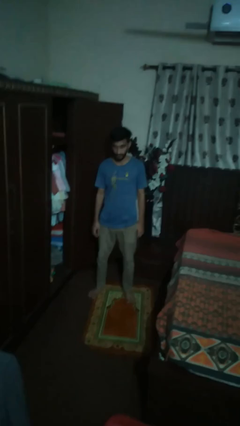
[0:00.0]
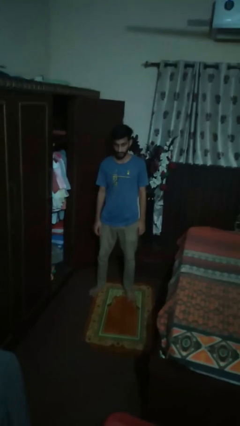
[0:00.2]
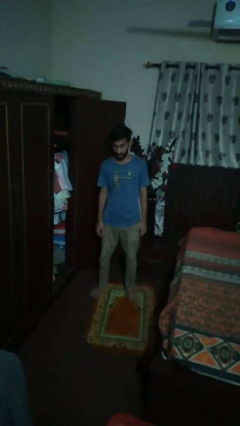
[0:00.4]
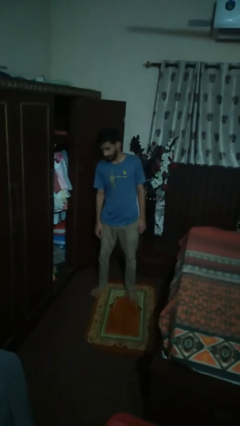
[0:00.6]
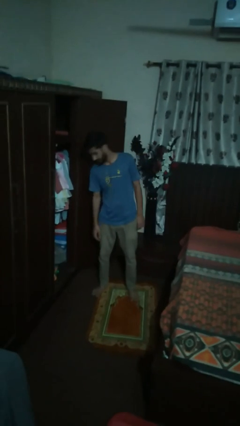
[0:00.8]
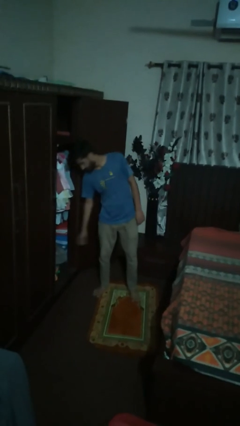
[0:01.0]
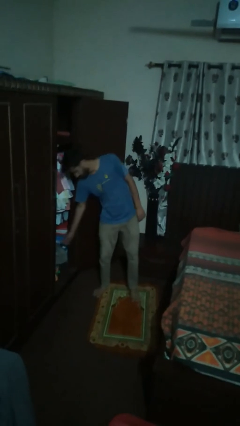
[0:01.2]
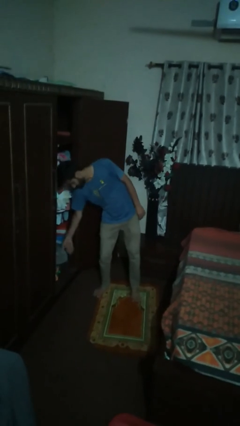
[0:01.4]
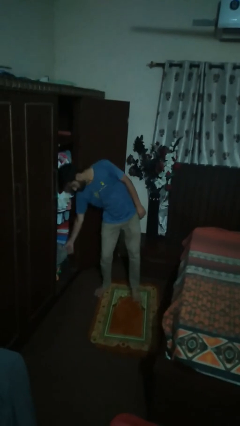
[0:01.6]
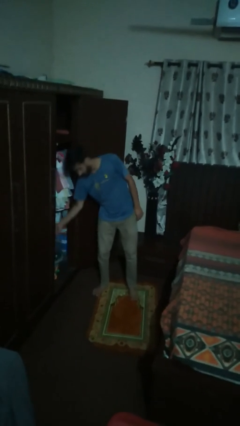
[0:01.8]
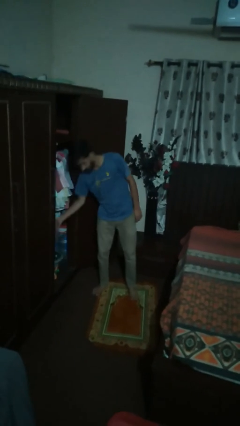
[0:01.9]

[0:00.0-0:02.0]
person picks up object from cabinet

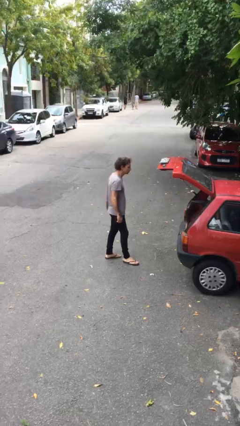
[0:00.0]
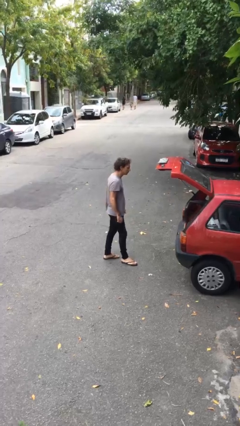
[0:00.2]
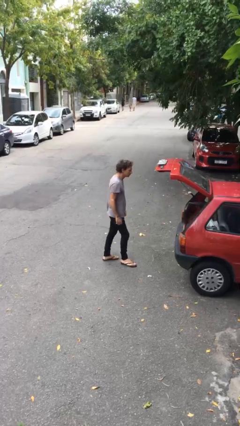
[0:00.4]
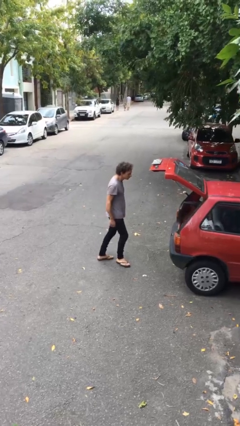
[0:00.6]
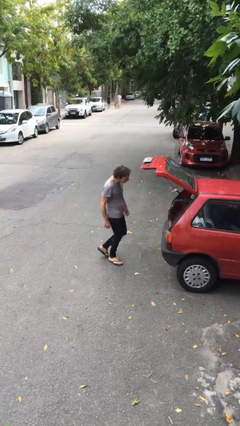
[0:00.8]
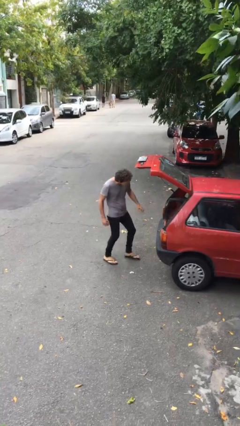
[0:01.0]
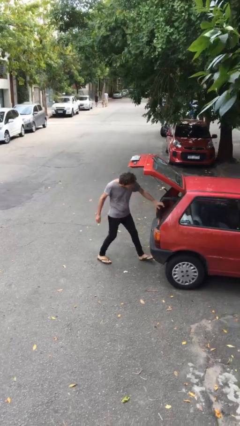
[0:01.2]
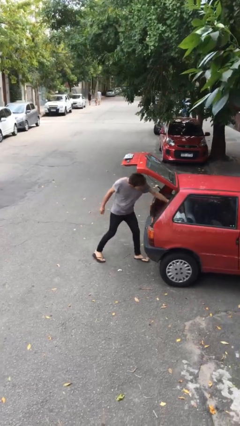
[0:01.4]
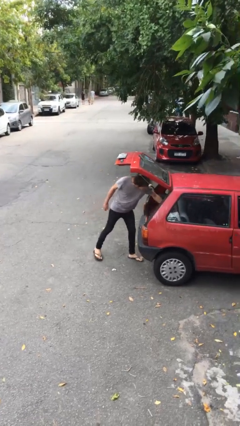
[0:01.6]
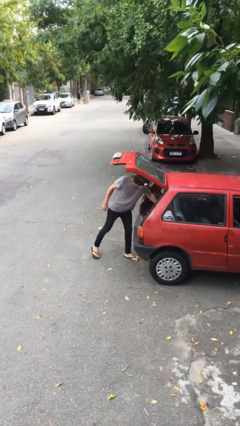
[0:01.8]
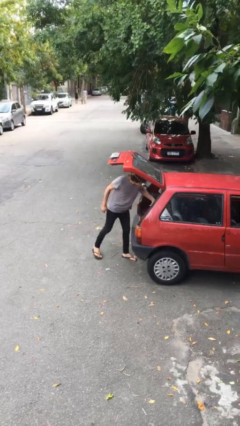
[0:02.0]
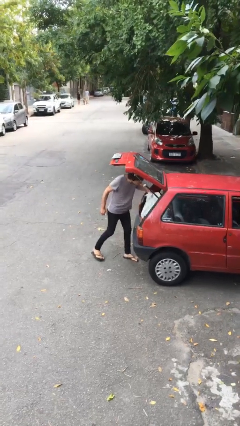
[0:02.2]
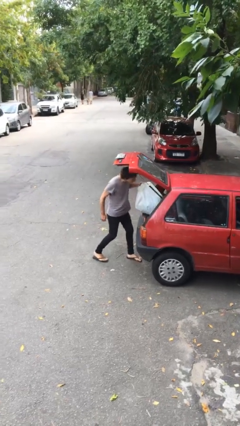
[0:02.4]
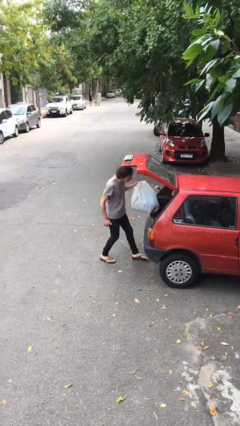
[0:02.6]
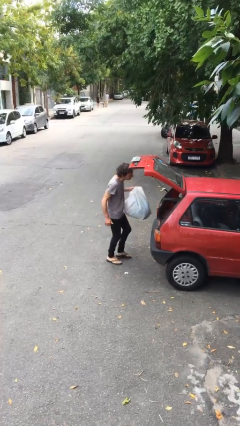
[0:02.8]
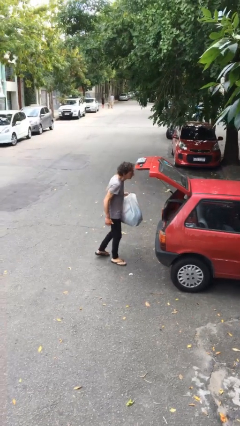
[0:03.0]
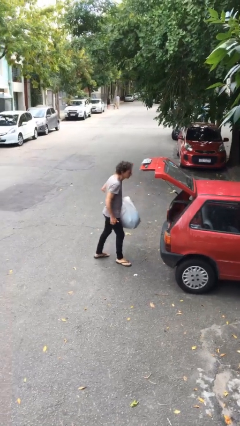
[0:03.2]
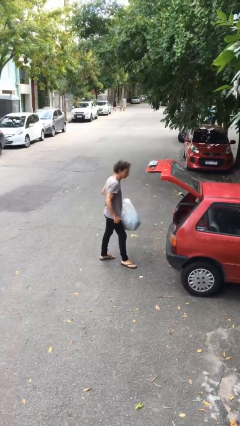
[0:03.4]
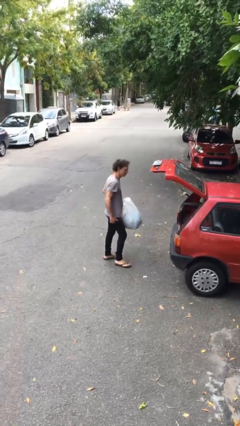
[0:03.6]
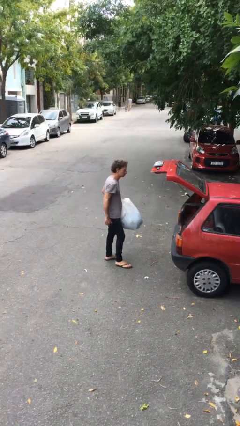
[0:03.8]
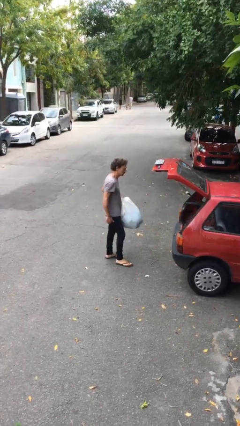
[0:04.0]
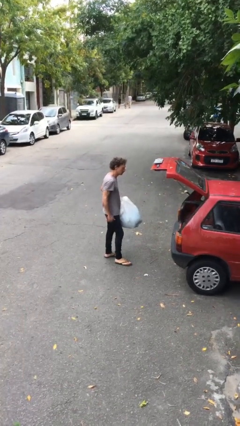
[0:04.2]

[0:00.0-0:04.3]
person unloads car

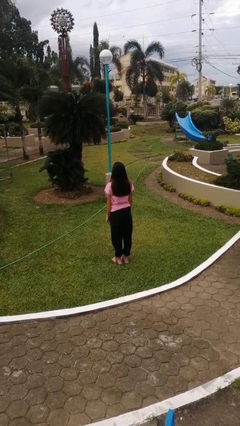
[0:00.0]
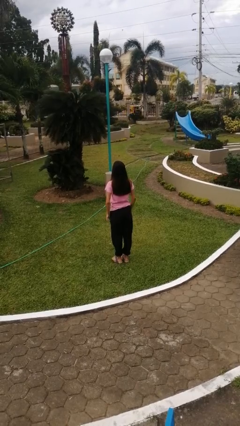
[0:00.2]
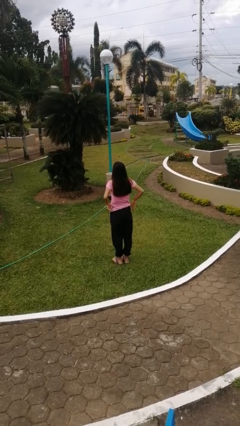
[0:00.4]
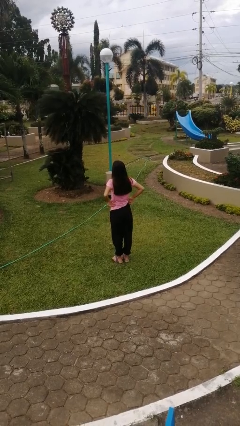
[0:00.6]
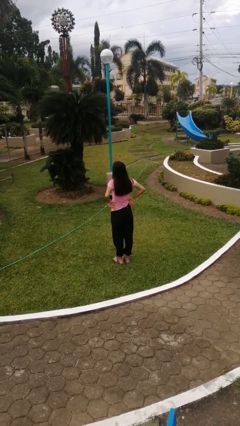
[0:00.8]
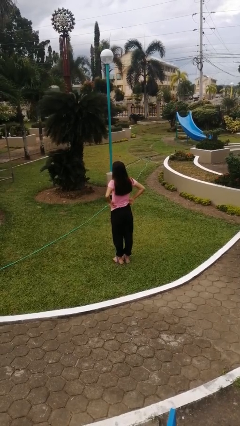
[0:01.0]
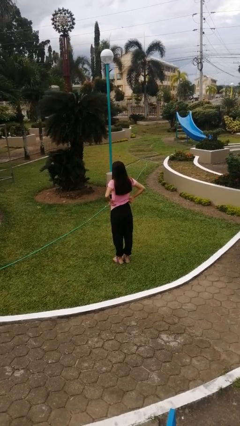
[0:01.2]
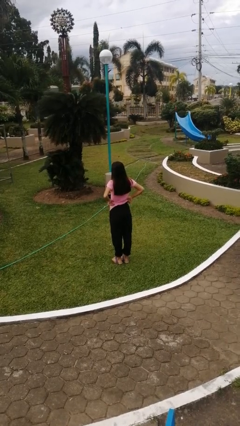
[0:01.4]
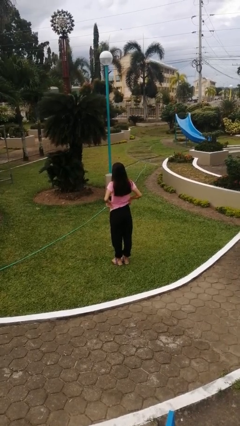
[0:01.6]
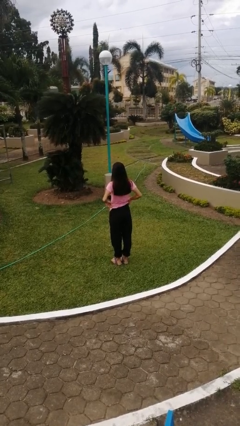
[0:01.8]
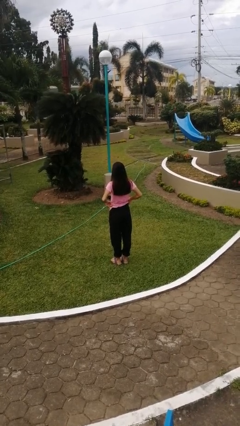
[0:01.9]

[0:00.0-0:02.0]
person hikes up pants

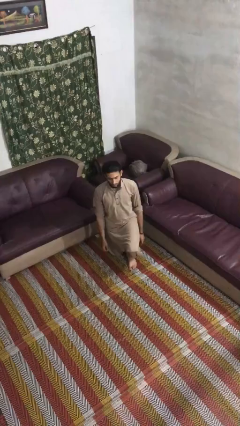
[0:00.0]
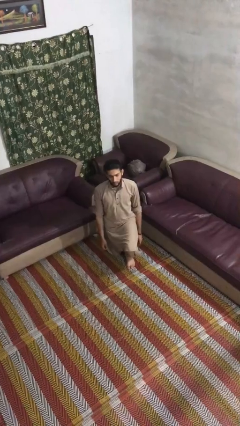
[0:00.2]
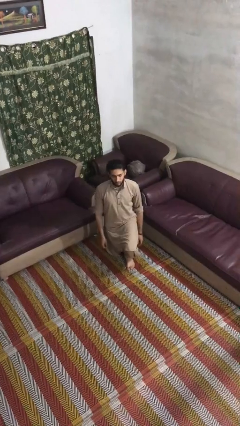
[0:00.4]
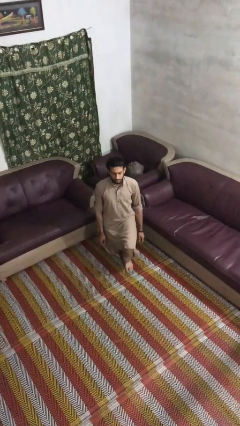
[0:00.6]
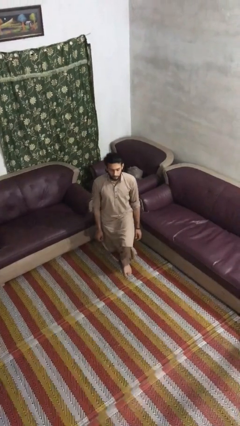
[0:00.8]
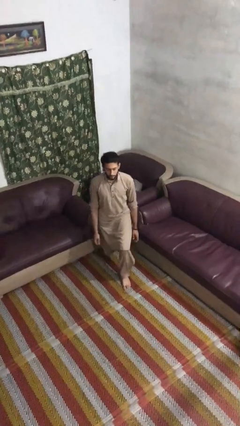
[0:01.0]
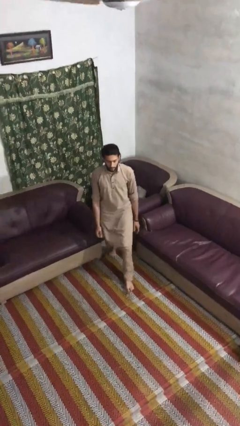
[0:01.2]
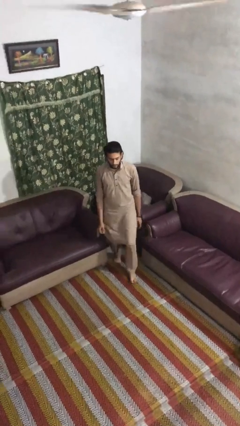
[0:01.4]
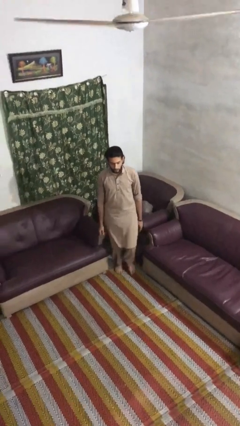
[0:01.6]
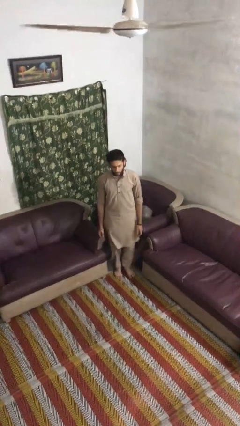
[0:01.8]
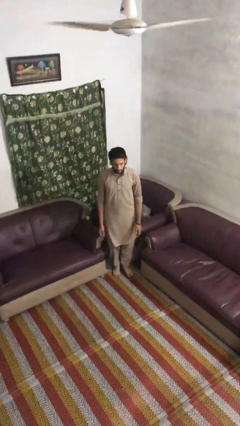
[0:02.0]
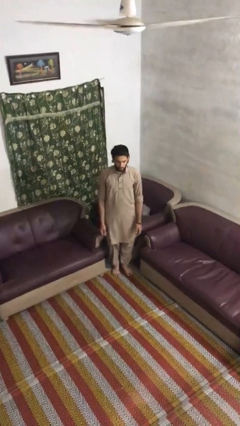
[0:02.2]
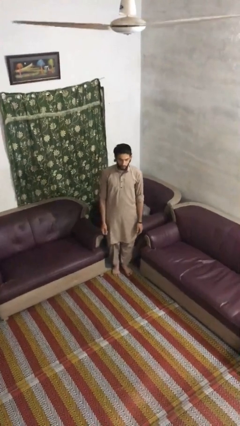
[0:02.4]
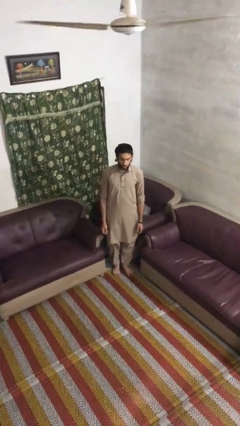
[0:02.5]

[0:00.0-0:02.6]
person stands up from floor

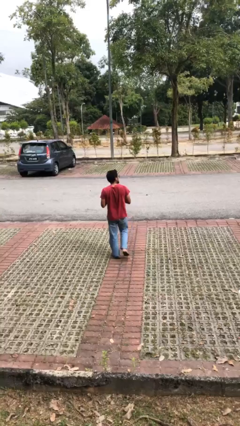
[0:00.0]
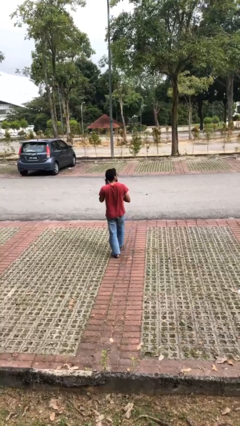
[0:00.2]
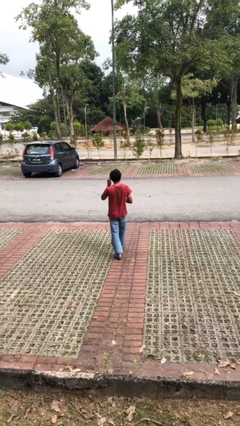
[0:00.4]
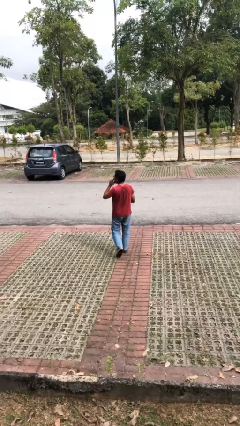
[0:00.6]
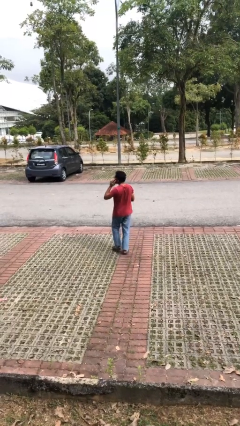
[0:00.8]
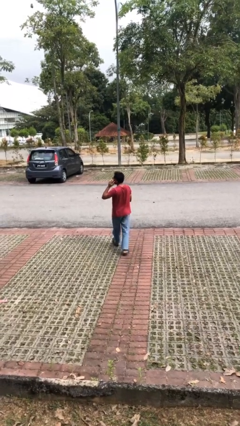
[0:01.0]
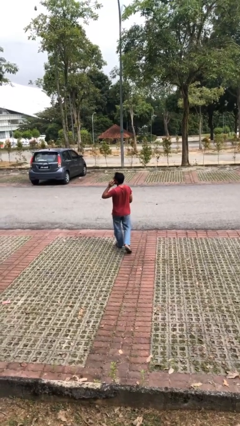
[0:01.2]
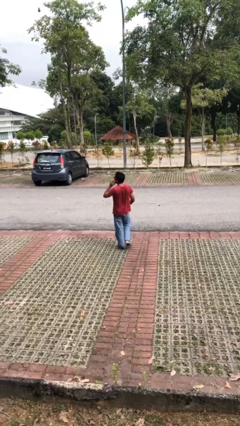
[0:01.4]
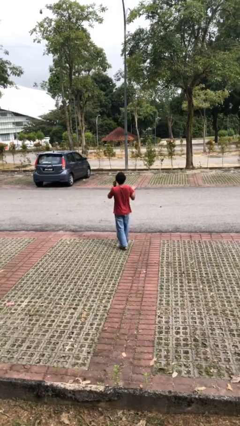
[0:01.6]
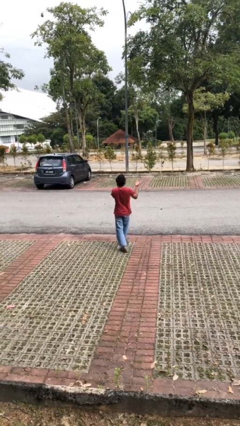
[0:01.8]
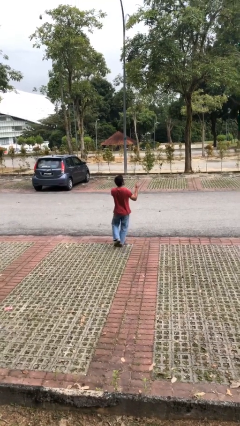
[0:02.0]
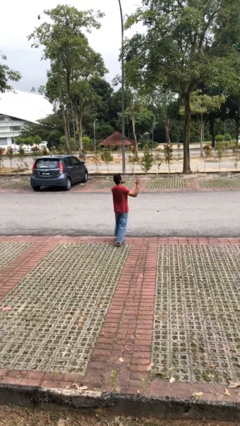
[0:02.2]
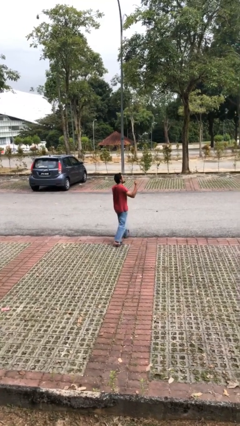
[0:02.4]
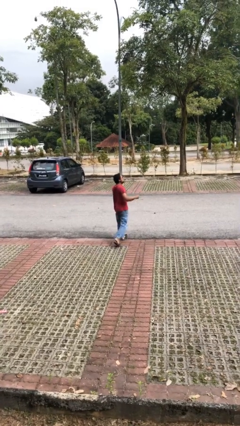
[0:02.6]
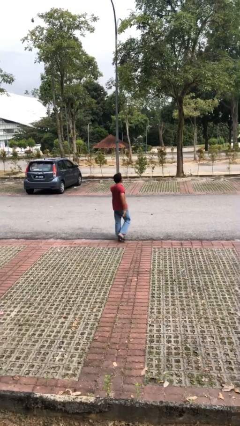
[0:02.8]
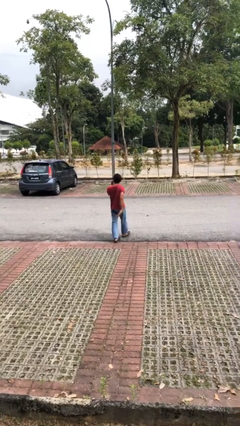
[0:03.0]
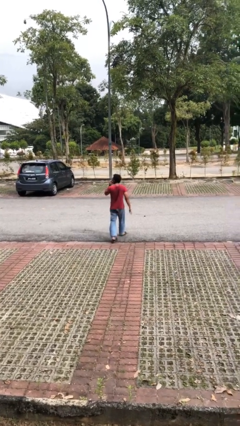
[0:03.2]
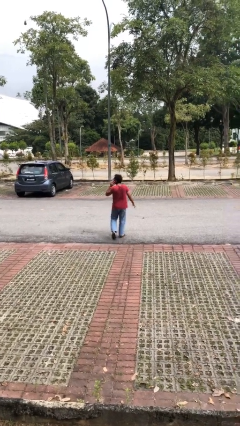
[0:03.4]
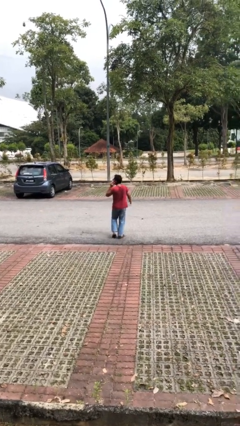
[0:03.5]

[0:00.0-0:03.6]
person talks on phone

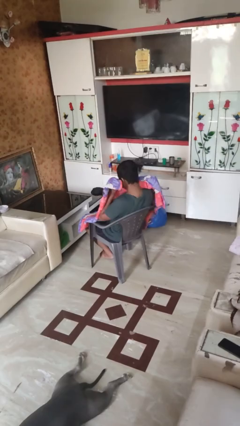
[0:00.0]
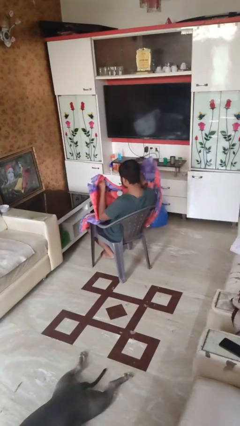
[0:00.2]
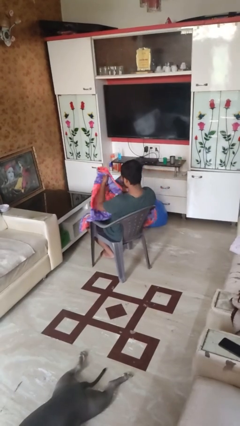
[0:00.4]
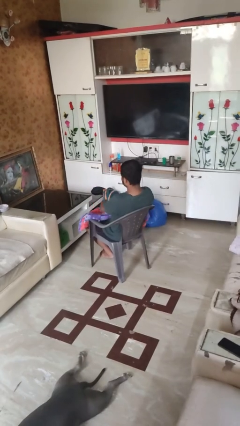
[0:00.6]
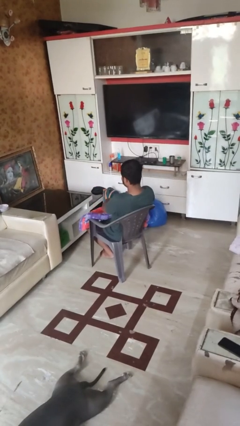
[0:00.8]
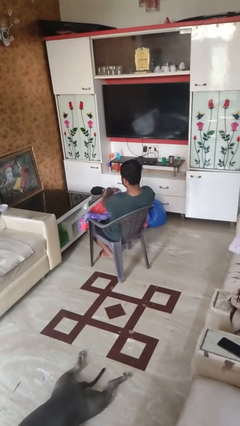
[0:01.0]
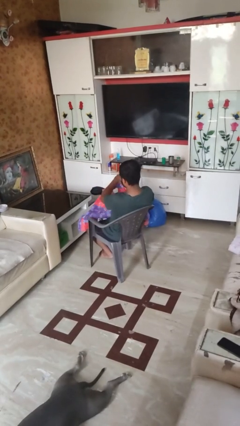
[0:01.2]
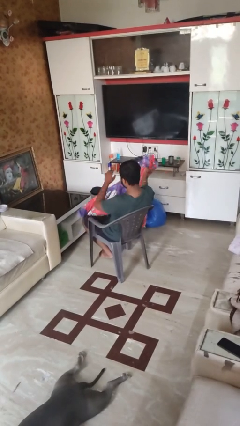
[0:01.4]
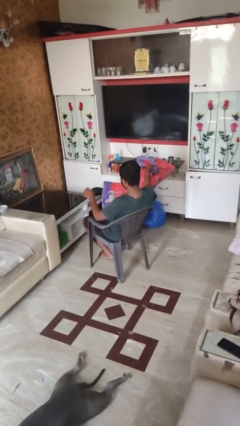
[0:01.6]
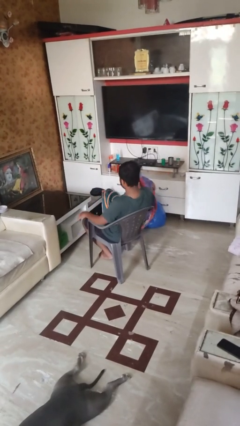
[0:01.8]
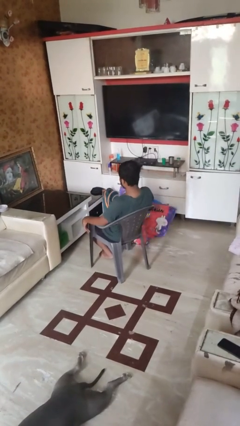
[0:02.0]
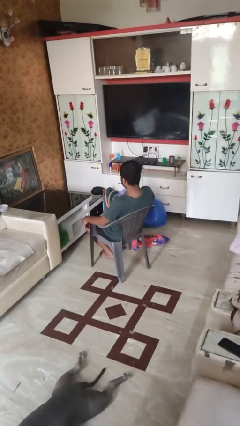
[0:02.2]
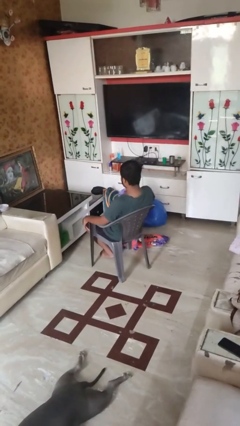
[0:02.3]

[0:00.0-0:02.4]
person uncovers with blanket

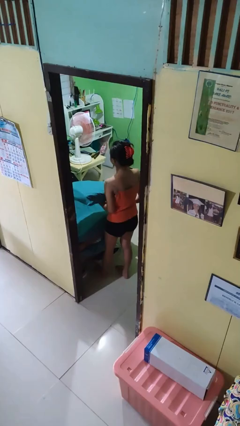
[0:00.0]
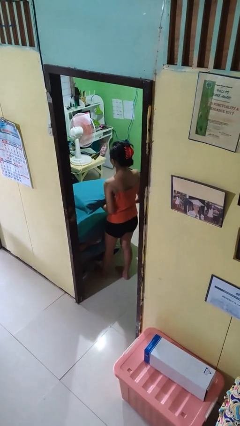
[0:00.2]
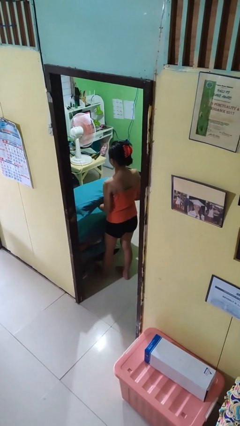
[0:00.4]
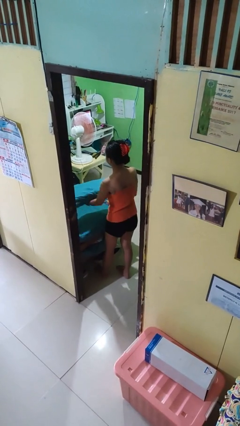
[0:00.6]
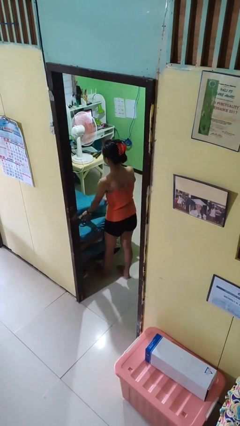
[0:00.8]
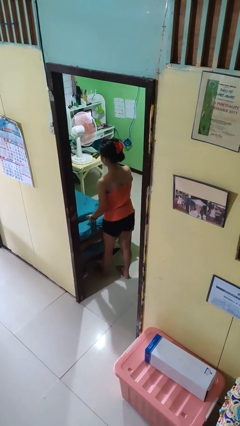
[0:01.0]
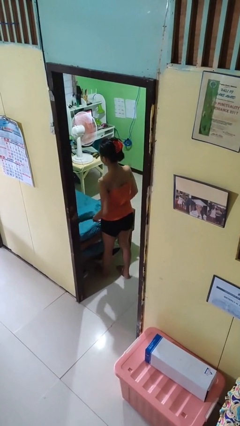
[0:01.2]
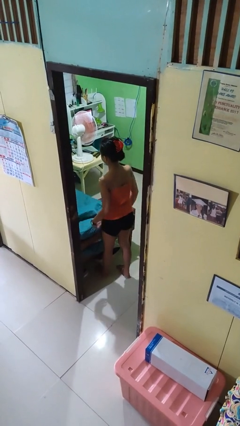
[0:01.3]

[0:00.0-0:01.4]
person puts down object on bed
